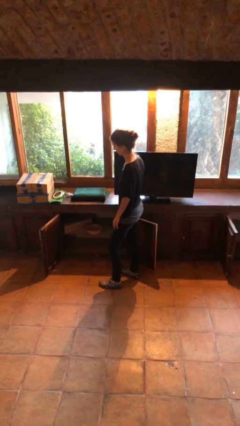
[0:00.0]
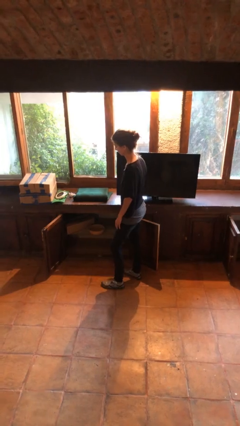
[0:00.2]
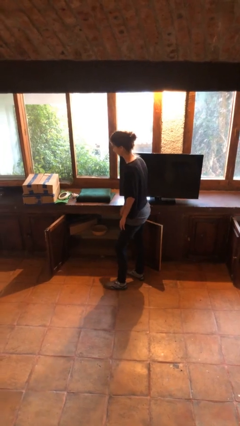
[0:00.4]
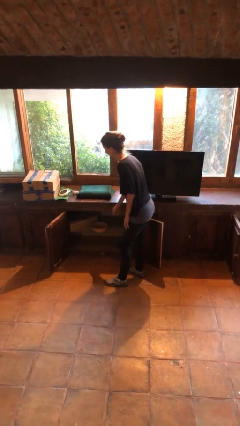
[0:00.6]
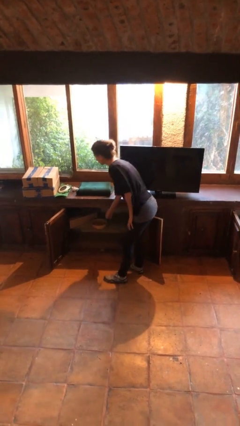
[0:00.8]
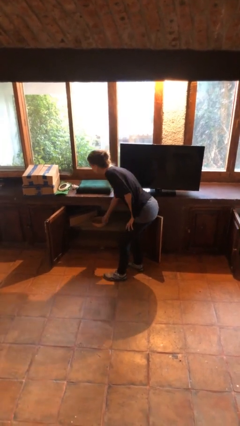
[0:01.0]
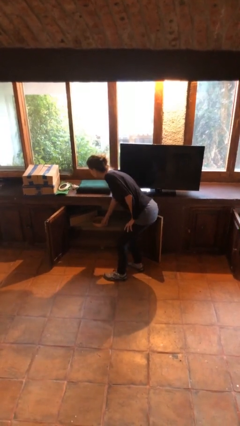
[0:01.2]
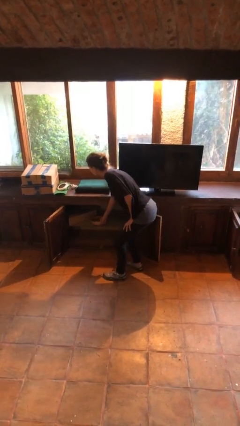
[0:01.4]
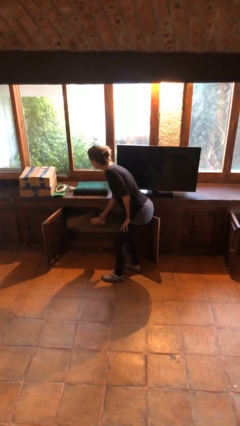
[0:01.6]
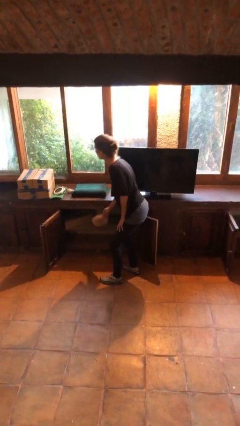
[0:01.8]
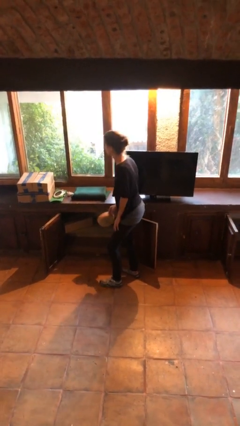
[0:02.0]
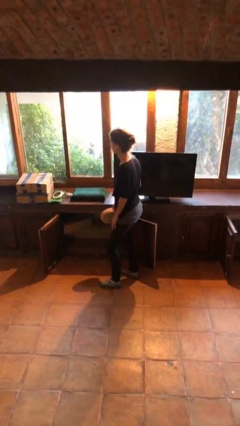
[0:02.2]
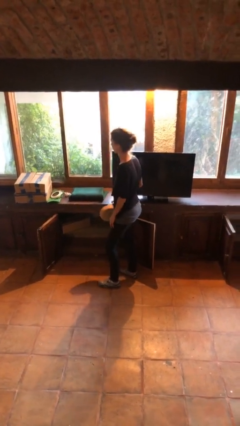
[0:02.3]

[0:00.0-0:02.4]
person picks up object from cabinet

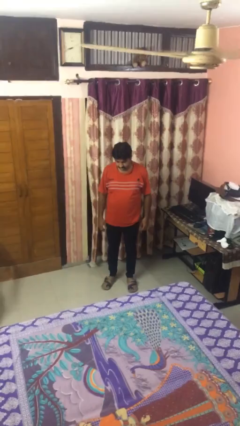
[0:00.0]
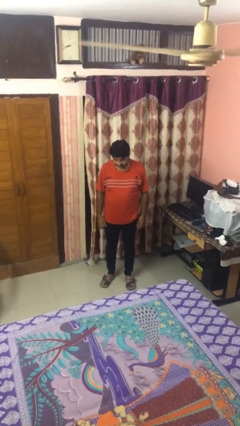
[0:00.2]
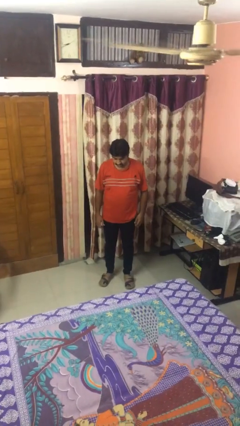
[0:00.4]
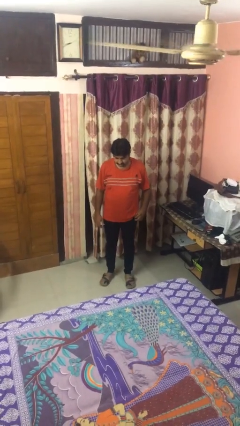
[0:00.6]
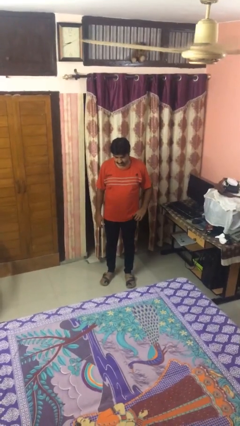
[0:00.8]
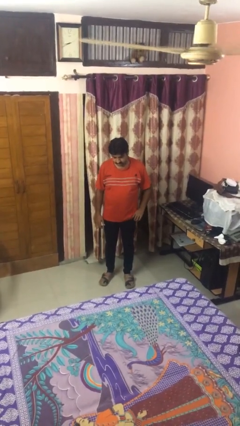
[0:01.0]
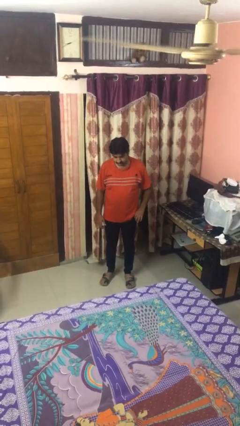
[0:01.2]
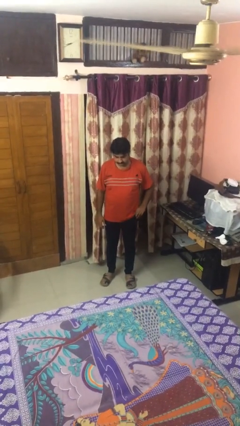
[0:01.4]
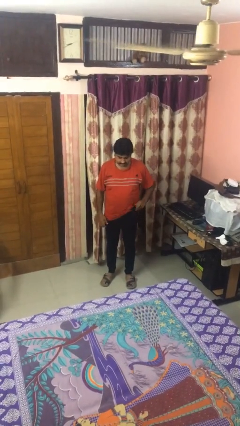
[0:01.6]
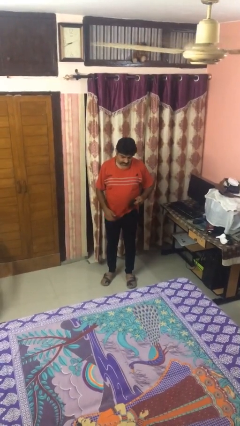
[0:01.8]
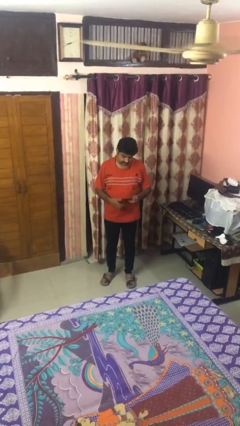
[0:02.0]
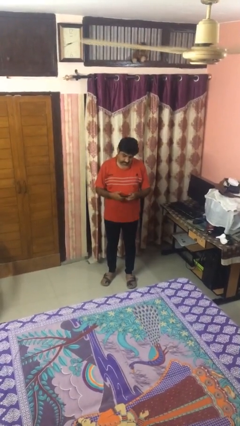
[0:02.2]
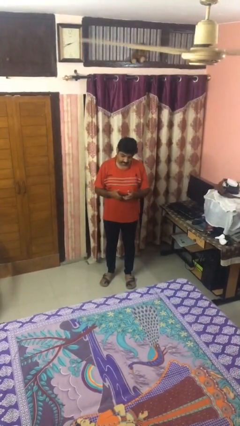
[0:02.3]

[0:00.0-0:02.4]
person takes phone from pocket

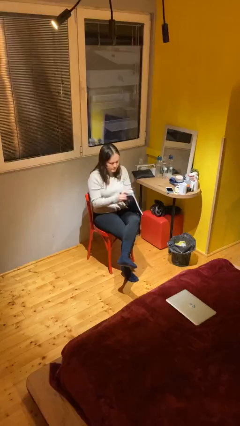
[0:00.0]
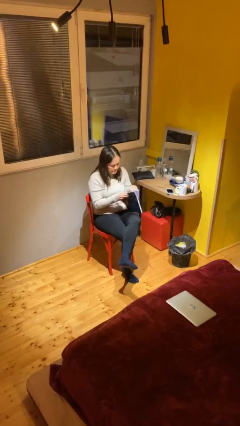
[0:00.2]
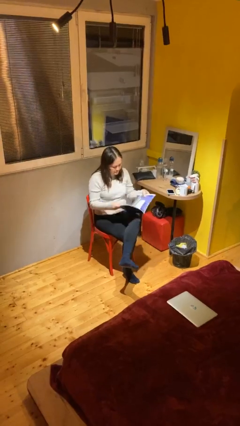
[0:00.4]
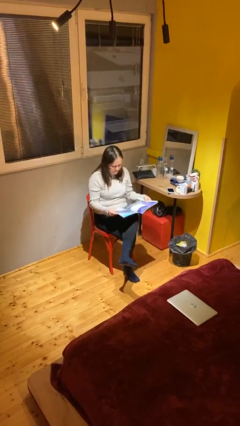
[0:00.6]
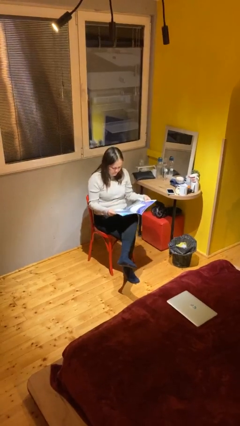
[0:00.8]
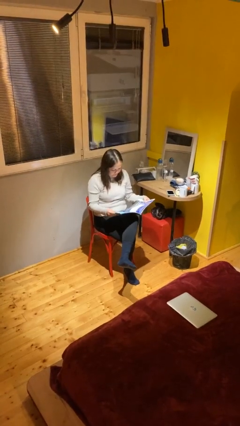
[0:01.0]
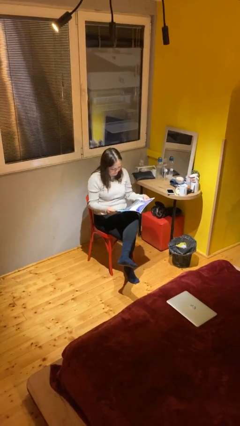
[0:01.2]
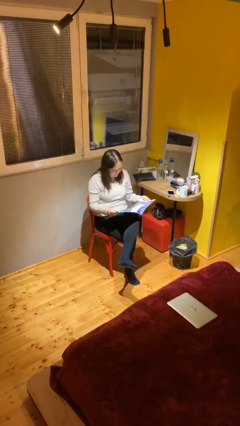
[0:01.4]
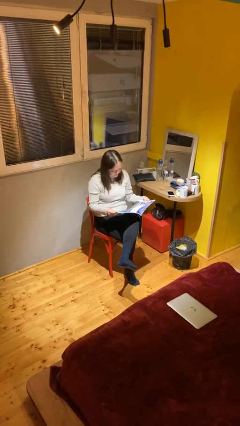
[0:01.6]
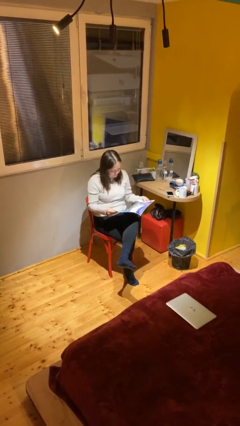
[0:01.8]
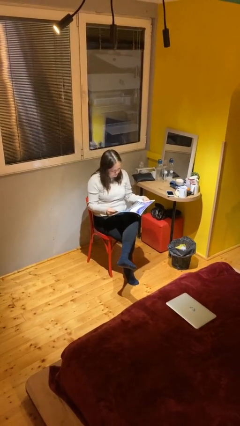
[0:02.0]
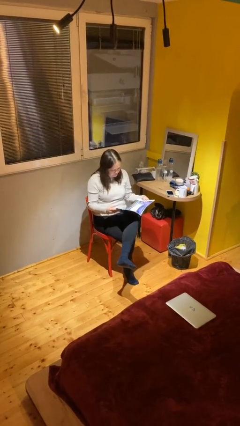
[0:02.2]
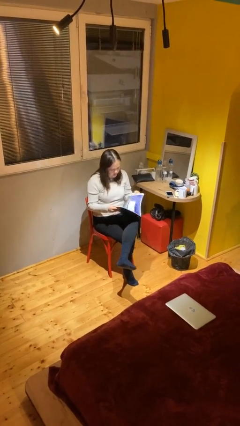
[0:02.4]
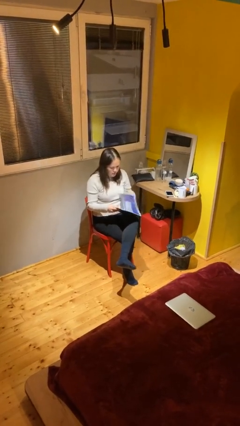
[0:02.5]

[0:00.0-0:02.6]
person reads document

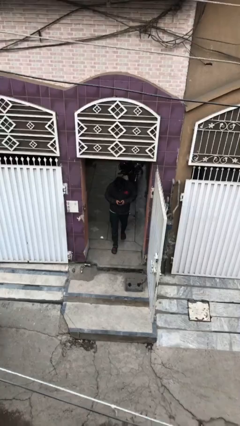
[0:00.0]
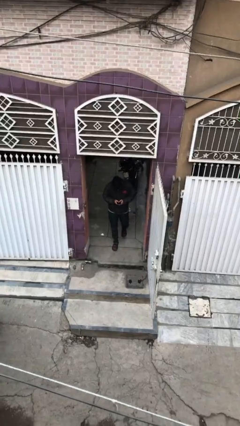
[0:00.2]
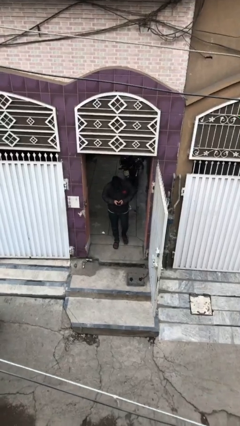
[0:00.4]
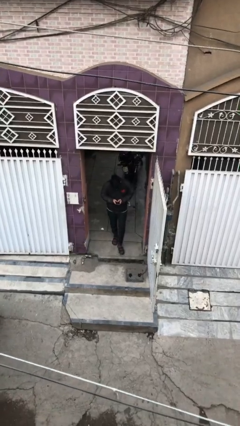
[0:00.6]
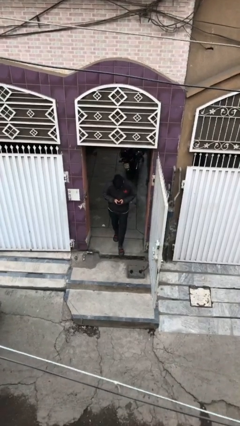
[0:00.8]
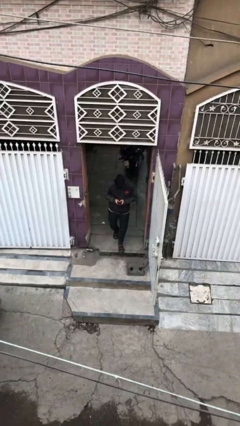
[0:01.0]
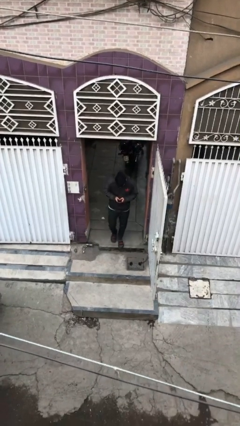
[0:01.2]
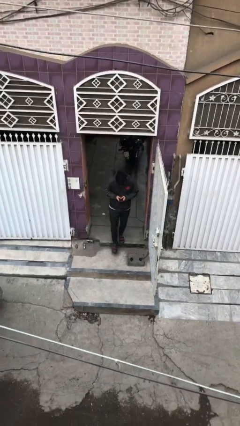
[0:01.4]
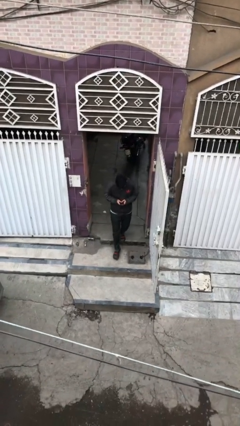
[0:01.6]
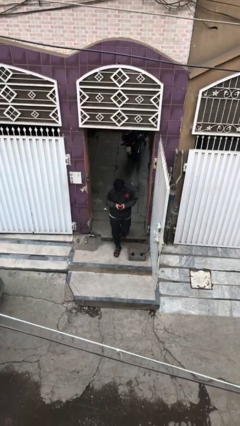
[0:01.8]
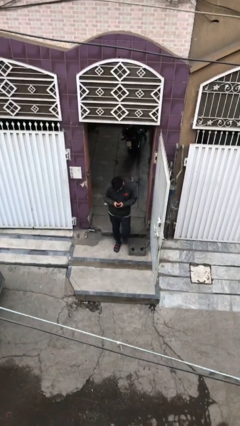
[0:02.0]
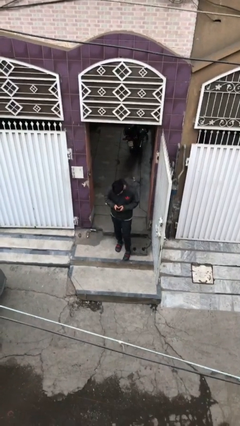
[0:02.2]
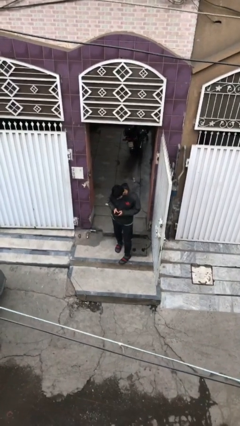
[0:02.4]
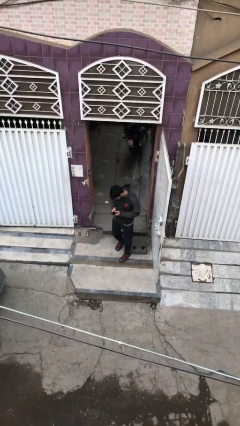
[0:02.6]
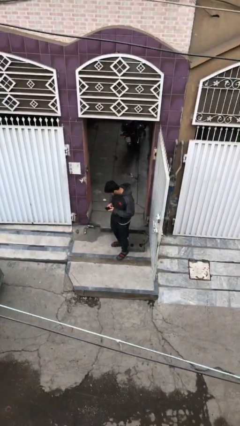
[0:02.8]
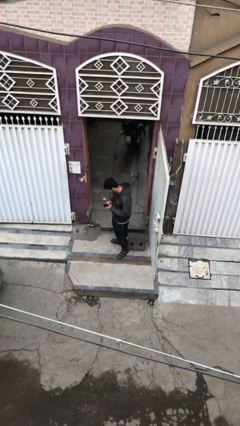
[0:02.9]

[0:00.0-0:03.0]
person enters scene through structure

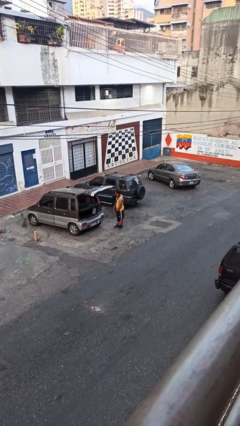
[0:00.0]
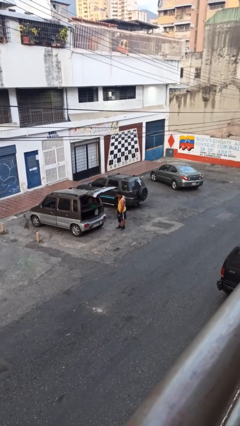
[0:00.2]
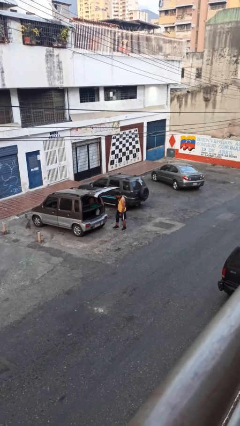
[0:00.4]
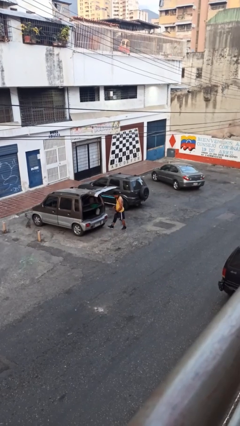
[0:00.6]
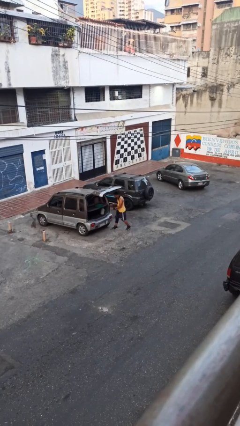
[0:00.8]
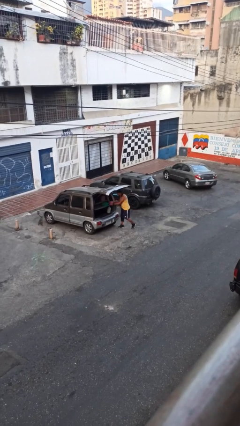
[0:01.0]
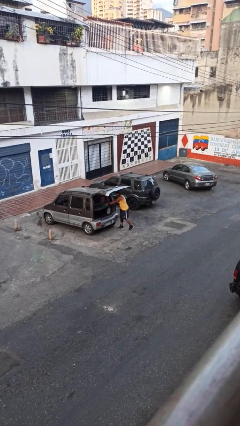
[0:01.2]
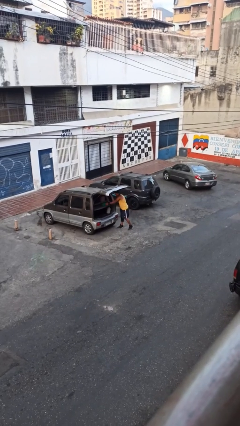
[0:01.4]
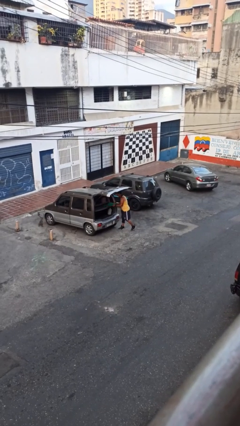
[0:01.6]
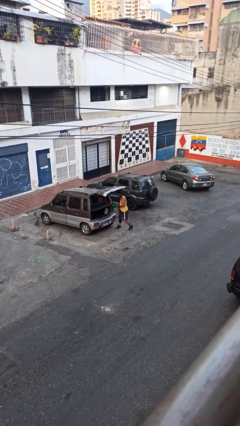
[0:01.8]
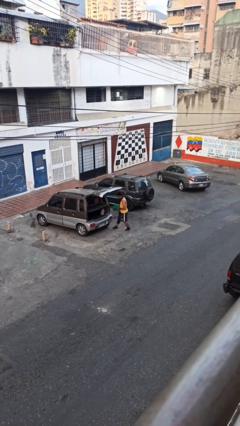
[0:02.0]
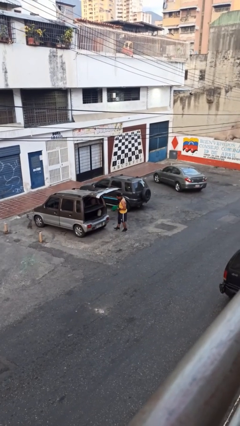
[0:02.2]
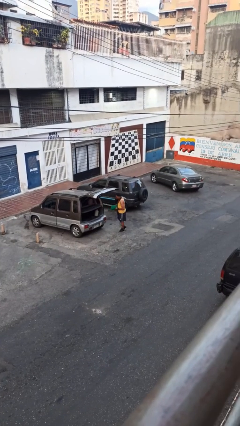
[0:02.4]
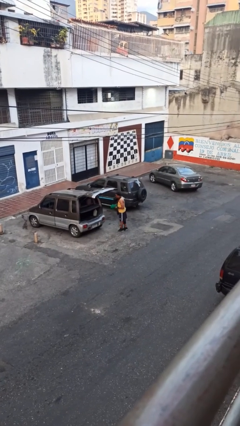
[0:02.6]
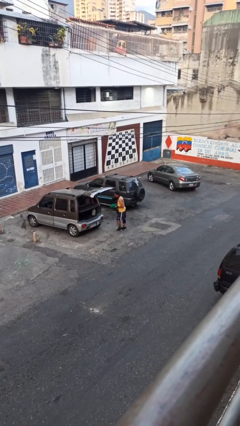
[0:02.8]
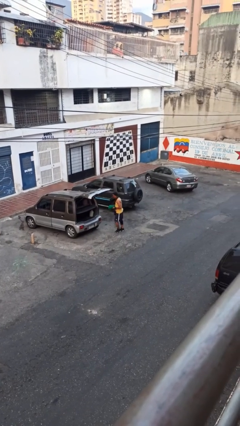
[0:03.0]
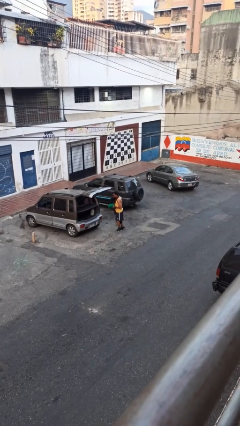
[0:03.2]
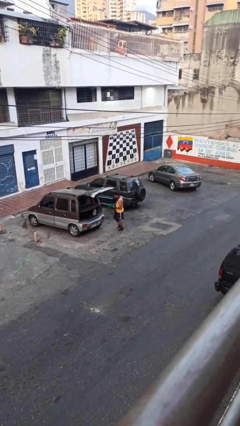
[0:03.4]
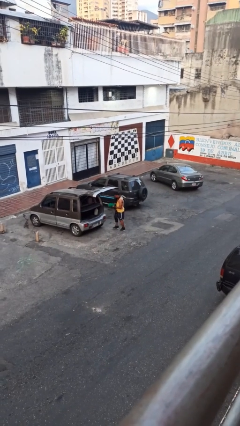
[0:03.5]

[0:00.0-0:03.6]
person unloads car

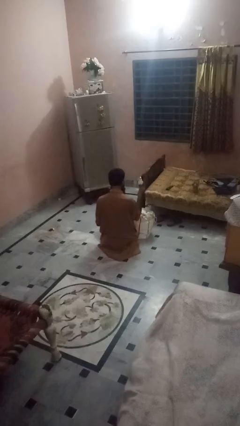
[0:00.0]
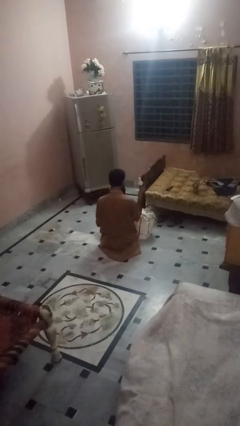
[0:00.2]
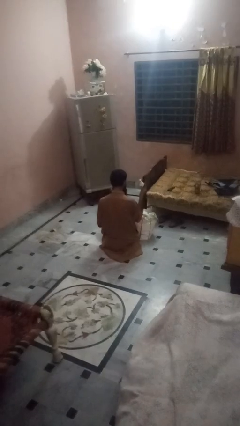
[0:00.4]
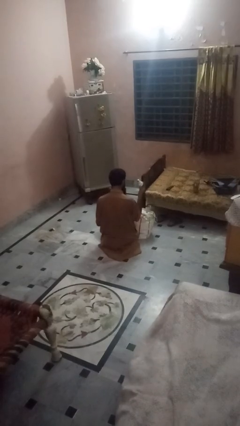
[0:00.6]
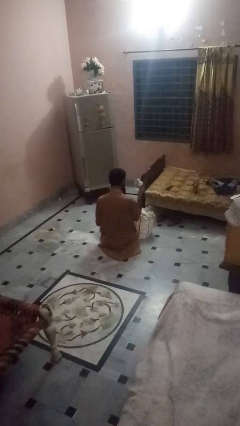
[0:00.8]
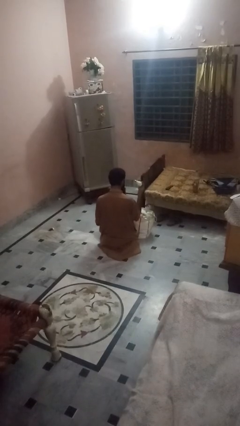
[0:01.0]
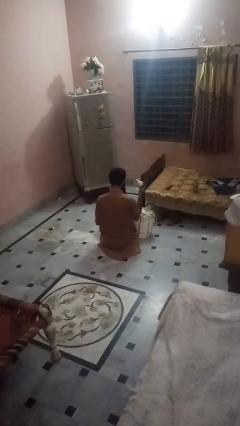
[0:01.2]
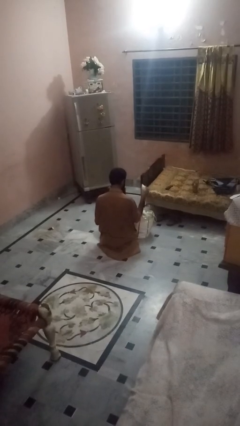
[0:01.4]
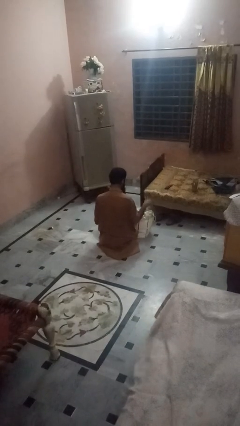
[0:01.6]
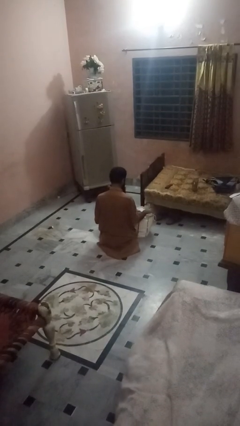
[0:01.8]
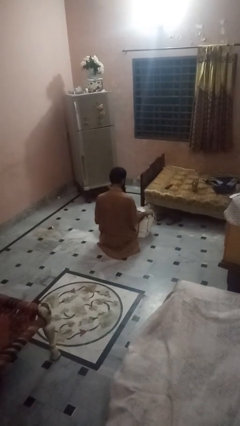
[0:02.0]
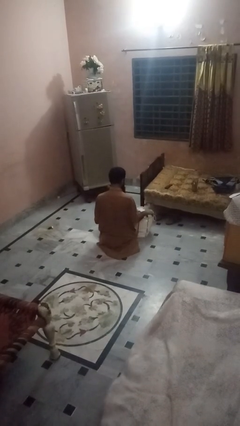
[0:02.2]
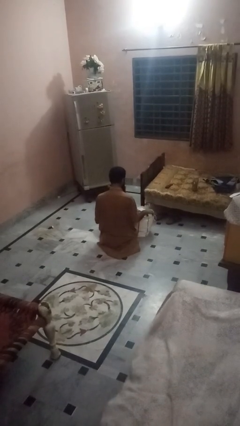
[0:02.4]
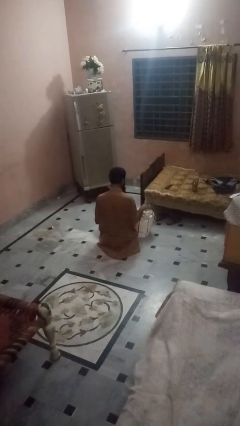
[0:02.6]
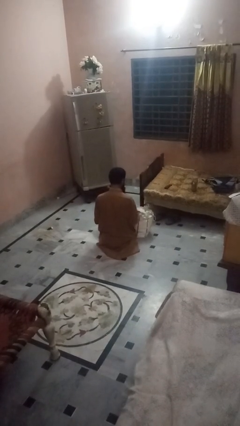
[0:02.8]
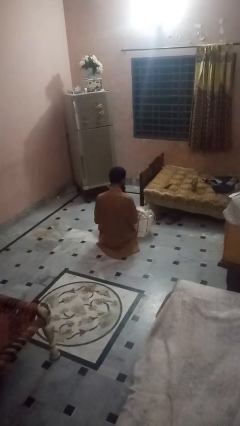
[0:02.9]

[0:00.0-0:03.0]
person puts object into bag

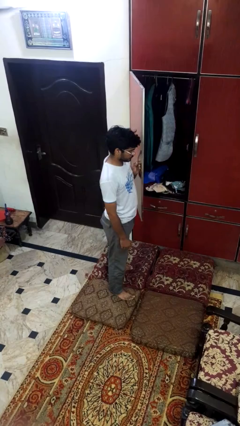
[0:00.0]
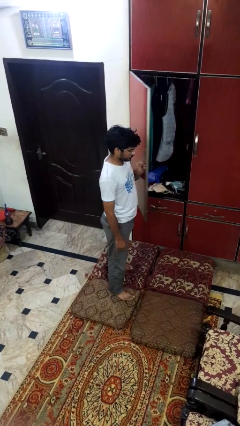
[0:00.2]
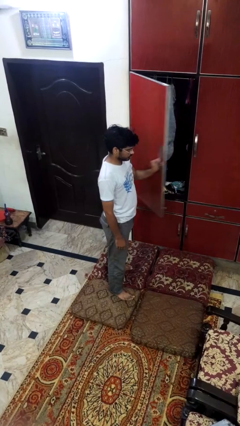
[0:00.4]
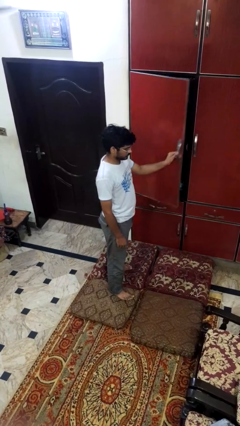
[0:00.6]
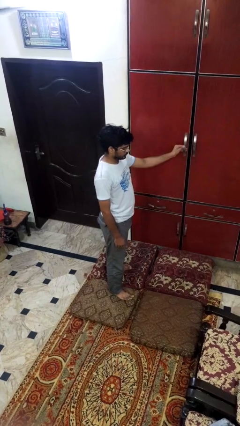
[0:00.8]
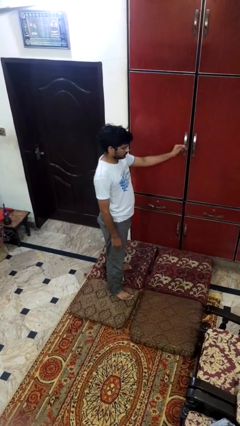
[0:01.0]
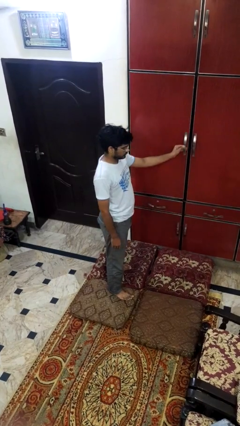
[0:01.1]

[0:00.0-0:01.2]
person closes closet door
